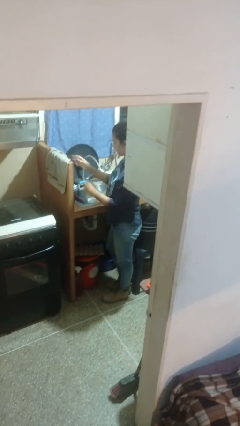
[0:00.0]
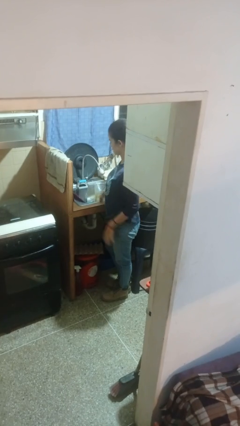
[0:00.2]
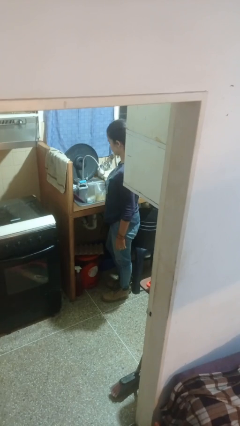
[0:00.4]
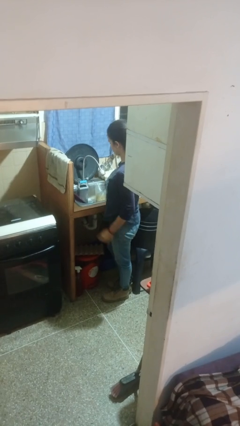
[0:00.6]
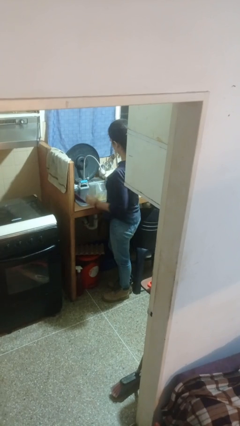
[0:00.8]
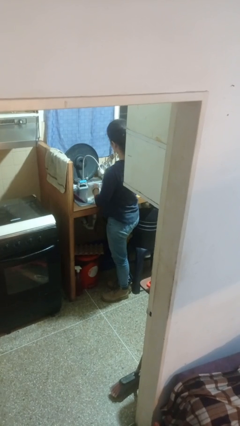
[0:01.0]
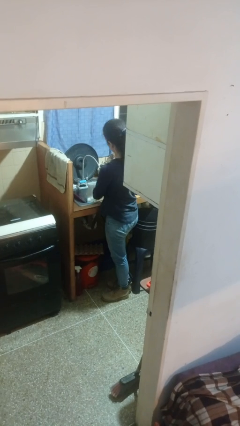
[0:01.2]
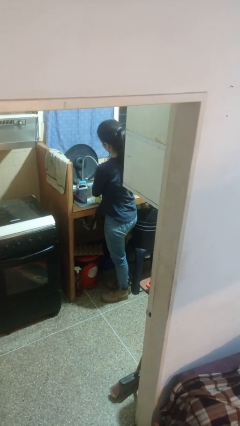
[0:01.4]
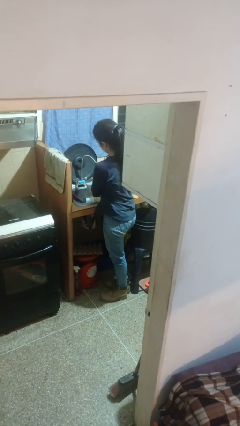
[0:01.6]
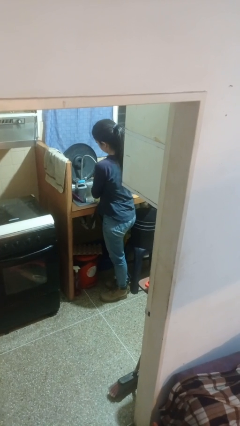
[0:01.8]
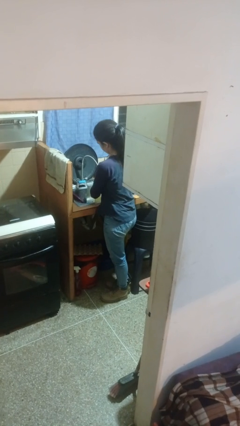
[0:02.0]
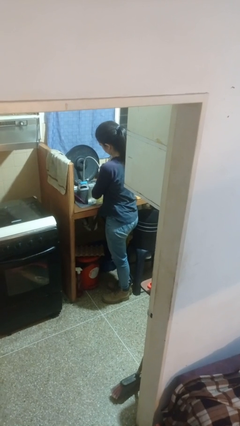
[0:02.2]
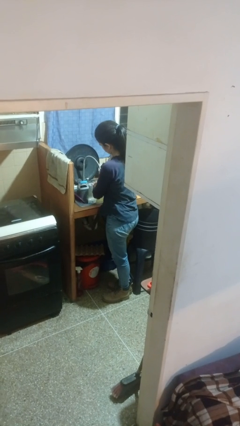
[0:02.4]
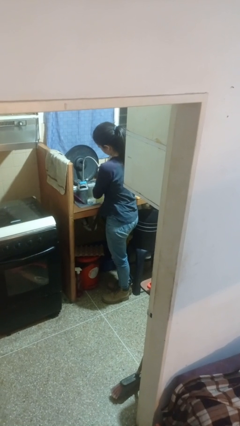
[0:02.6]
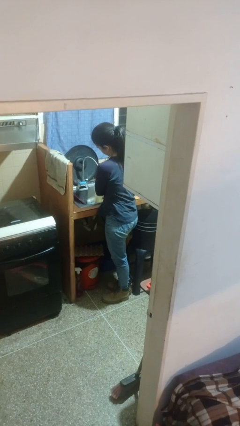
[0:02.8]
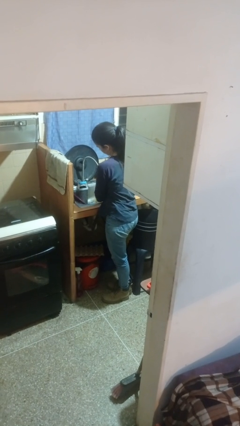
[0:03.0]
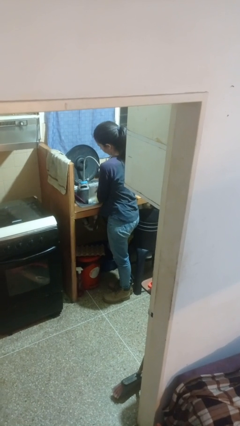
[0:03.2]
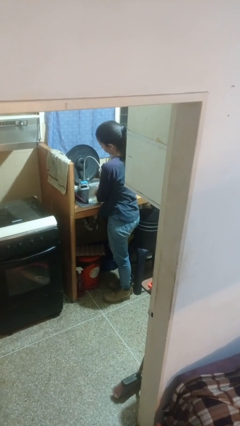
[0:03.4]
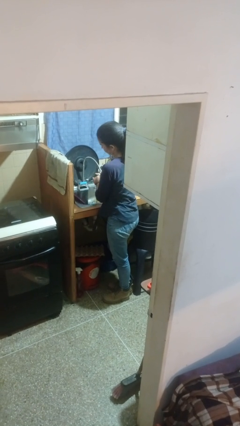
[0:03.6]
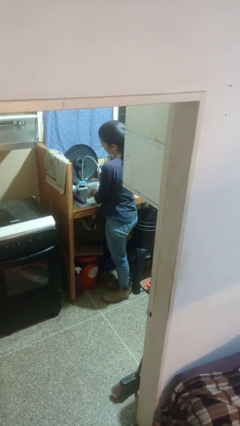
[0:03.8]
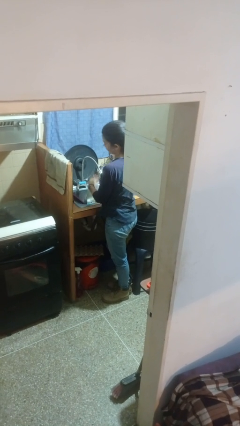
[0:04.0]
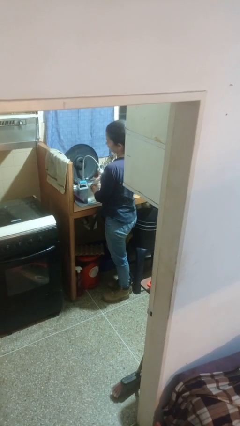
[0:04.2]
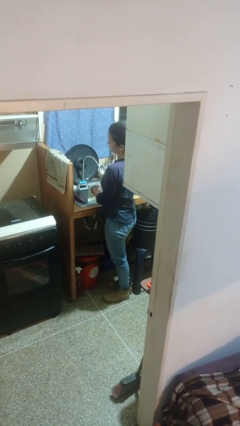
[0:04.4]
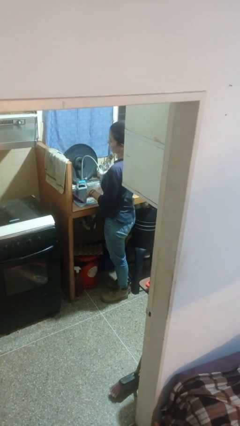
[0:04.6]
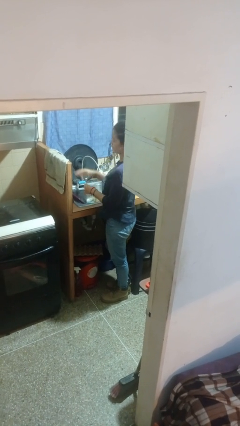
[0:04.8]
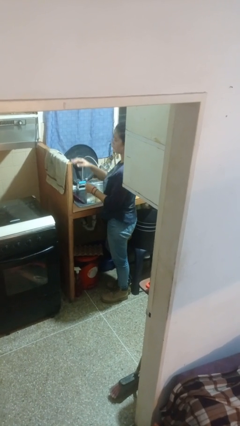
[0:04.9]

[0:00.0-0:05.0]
person washes hands

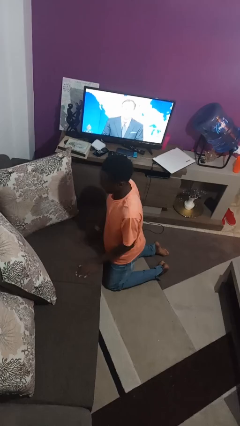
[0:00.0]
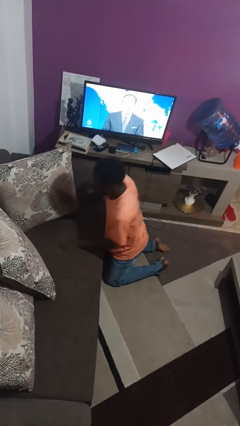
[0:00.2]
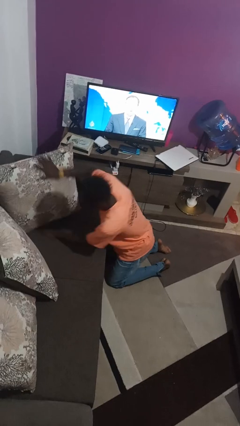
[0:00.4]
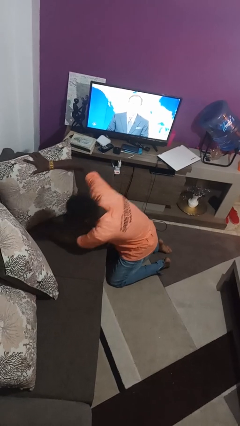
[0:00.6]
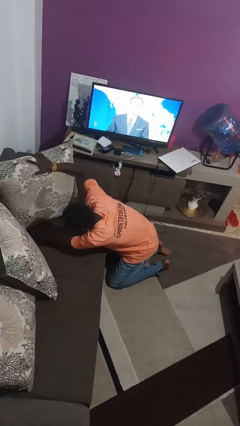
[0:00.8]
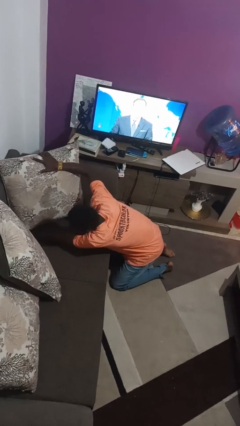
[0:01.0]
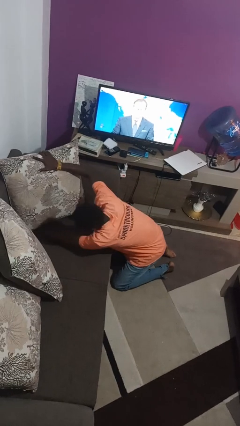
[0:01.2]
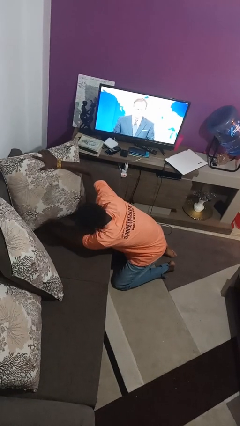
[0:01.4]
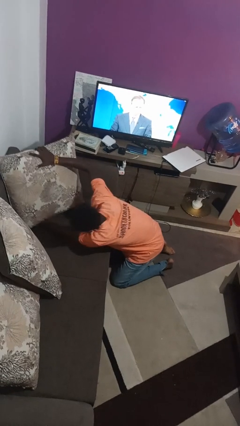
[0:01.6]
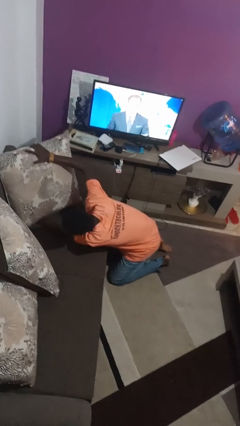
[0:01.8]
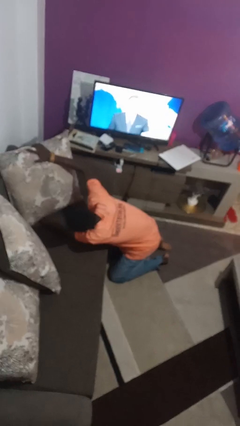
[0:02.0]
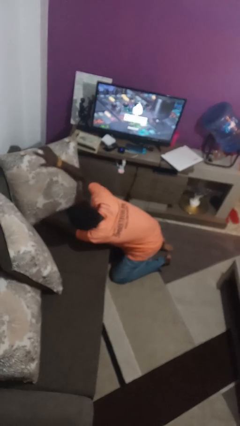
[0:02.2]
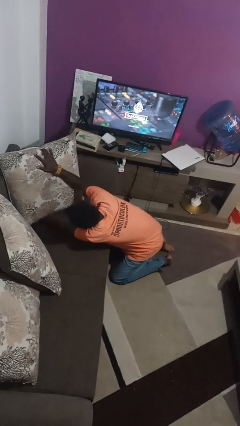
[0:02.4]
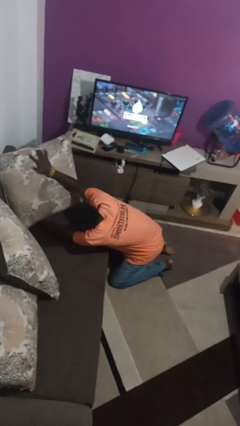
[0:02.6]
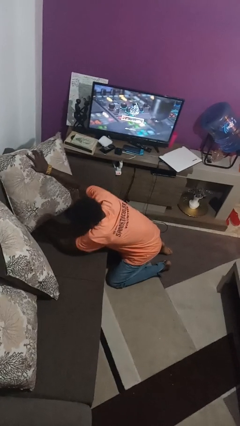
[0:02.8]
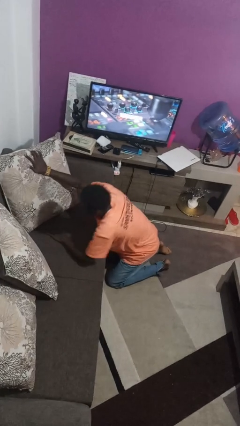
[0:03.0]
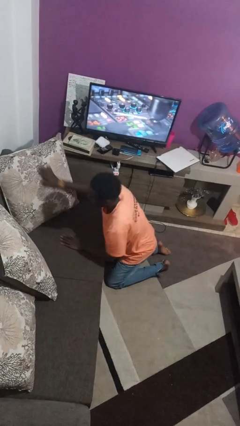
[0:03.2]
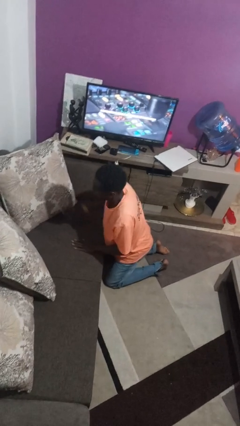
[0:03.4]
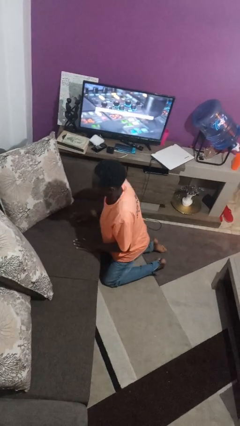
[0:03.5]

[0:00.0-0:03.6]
person searches in couch

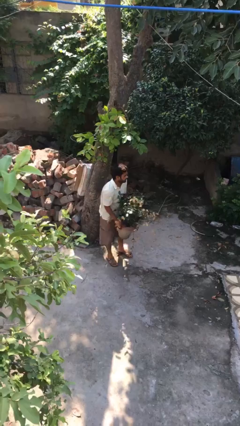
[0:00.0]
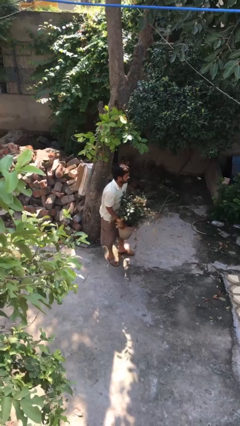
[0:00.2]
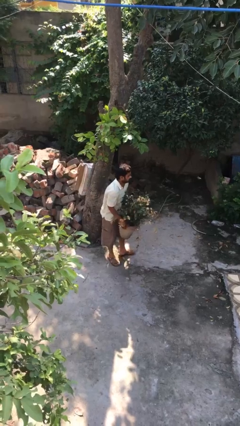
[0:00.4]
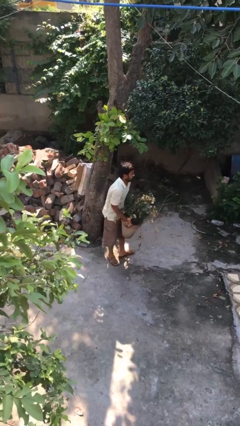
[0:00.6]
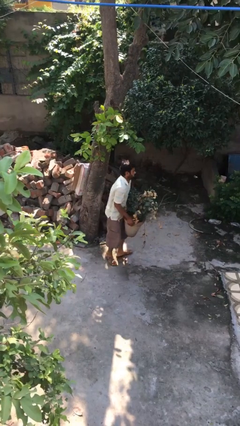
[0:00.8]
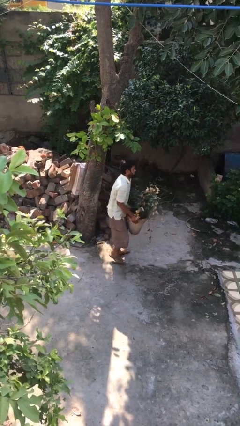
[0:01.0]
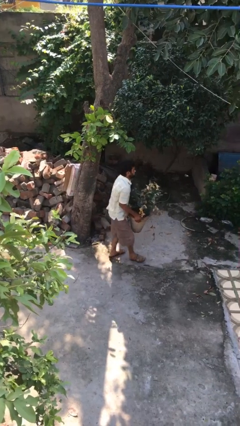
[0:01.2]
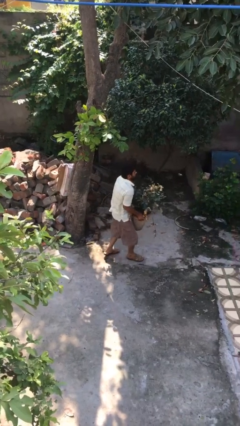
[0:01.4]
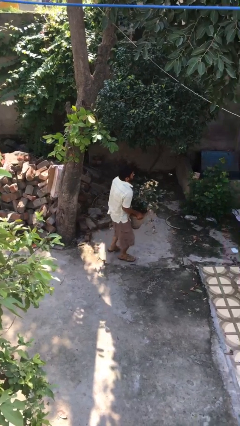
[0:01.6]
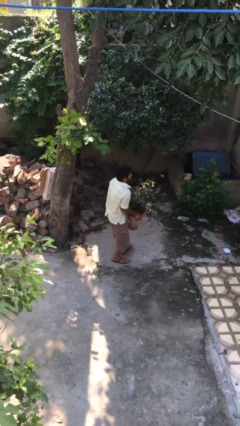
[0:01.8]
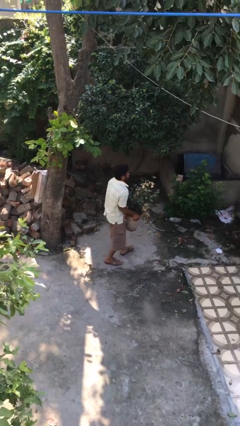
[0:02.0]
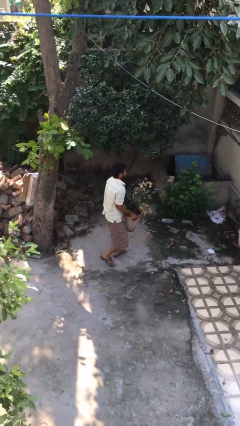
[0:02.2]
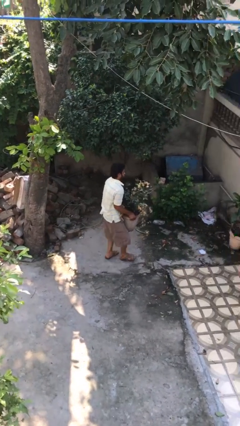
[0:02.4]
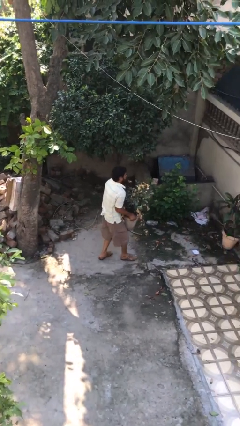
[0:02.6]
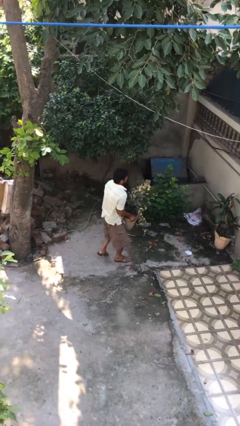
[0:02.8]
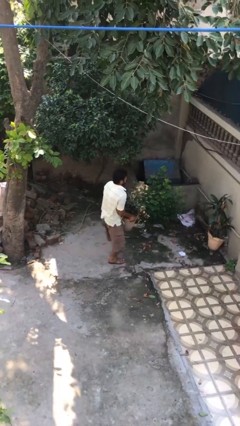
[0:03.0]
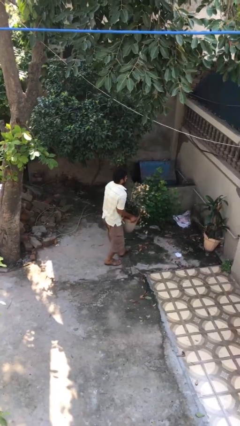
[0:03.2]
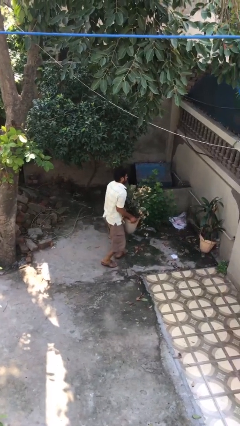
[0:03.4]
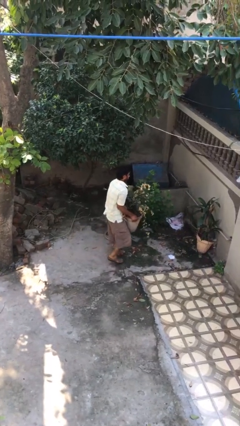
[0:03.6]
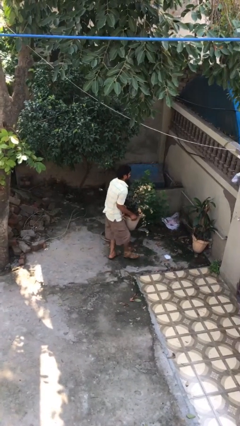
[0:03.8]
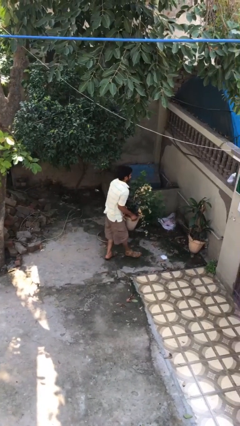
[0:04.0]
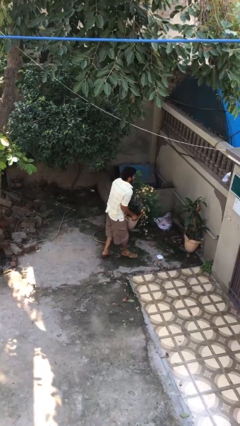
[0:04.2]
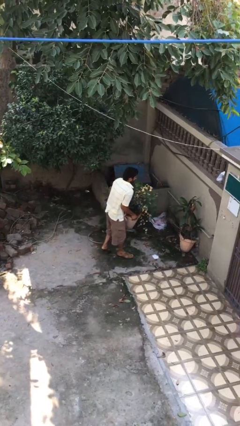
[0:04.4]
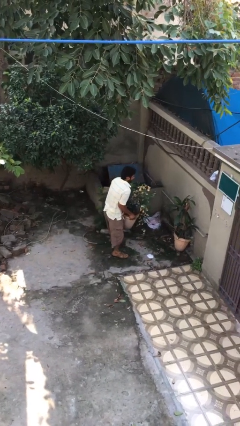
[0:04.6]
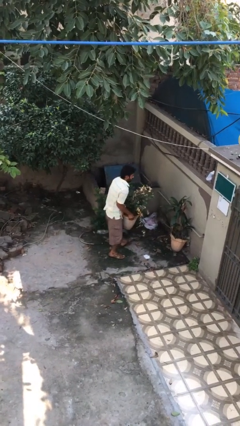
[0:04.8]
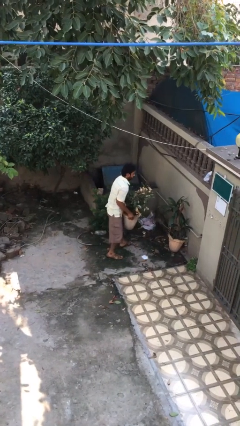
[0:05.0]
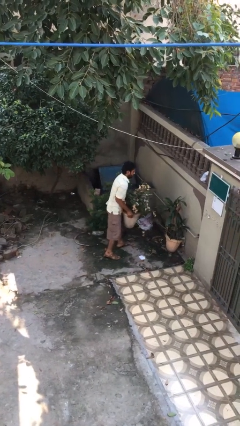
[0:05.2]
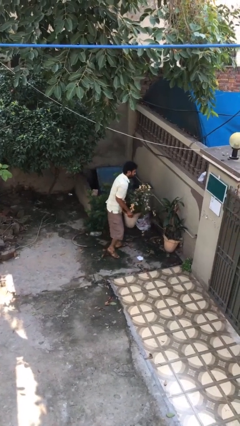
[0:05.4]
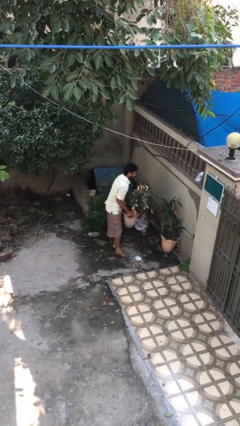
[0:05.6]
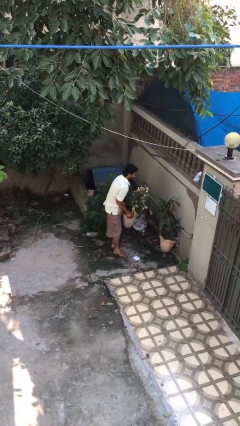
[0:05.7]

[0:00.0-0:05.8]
person carries heavy object

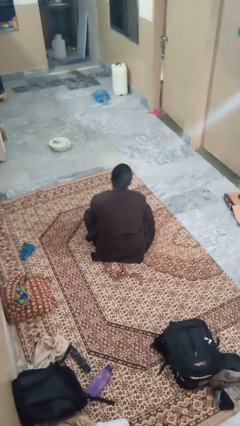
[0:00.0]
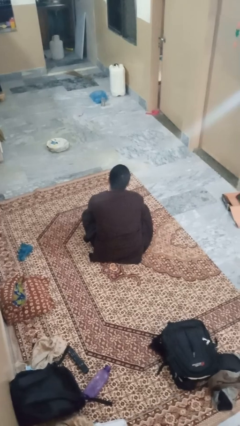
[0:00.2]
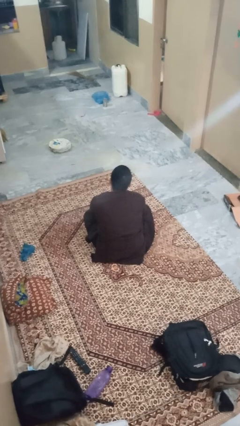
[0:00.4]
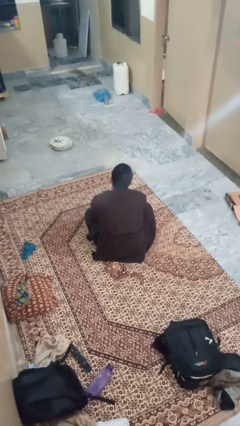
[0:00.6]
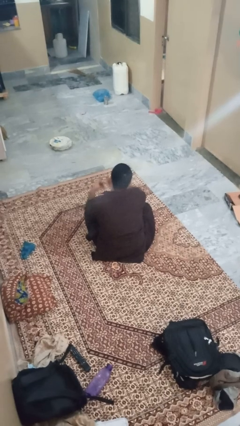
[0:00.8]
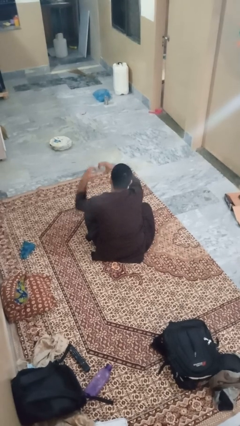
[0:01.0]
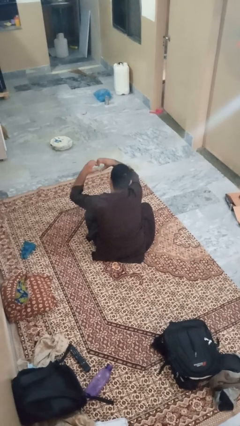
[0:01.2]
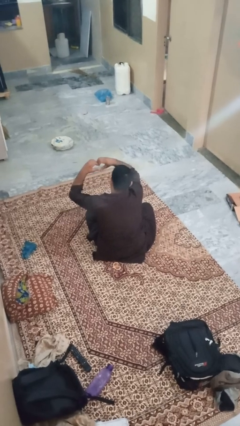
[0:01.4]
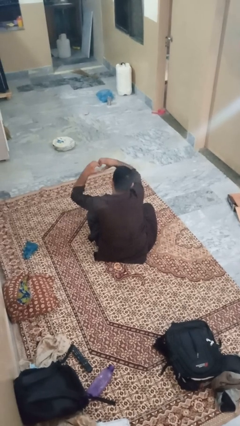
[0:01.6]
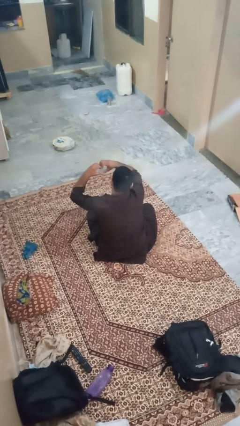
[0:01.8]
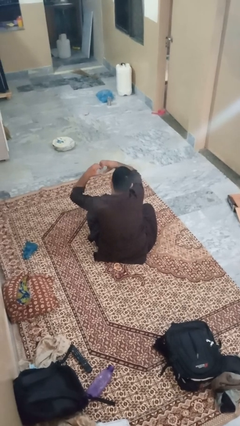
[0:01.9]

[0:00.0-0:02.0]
person gestures heart

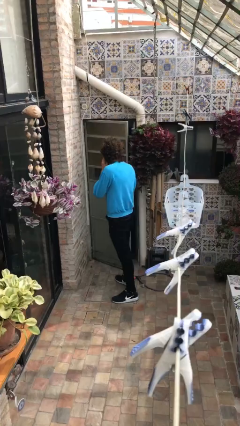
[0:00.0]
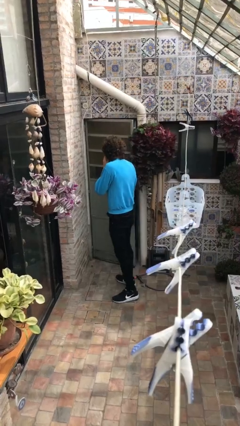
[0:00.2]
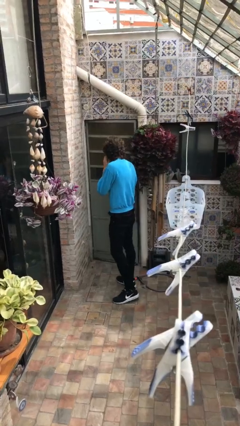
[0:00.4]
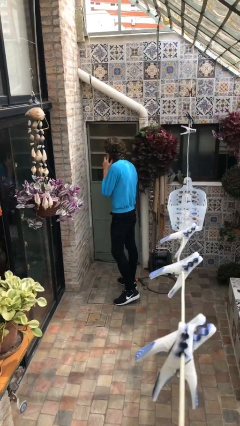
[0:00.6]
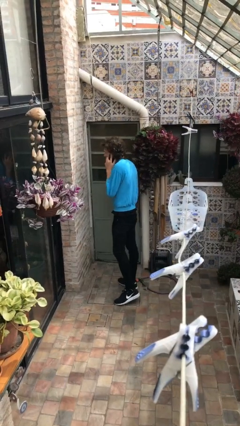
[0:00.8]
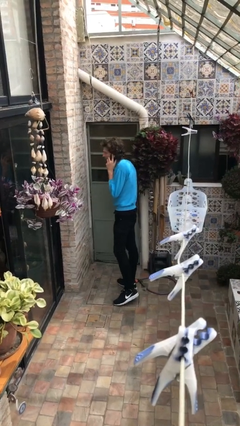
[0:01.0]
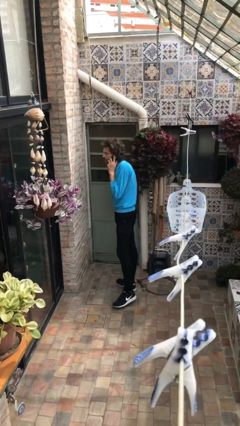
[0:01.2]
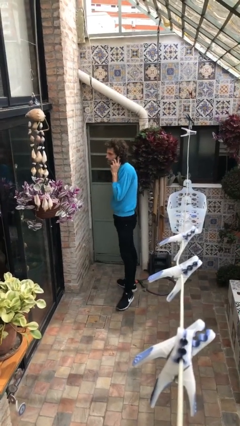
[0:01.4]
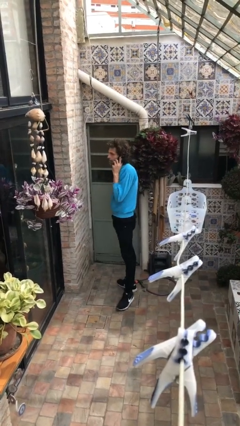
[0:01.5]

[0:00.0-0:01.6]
person closes facility door
